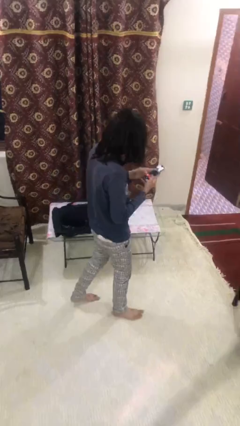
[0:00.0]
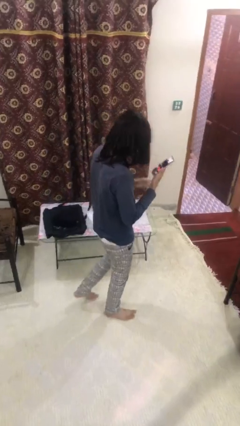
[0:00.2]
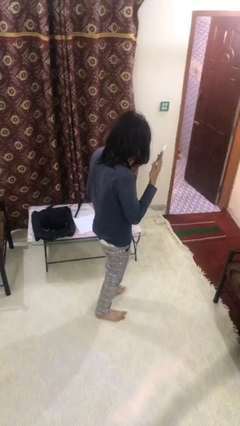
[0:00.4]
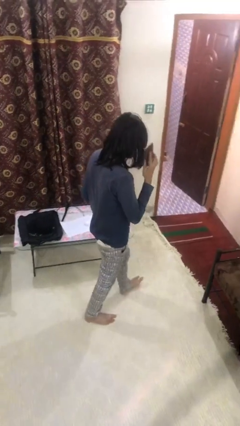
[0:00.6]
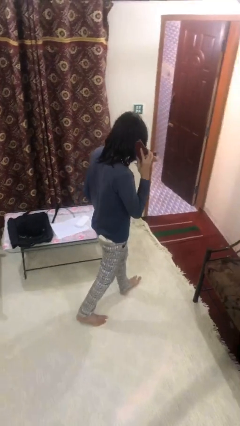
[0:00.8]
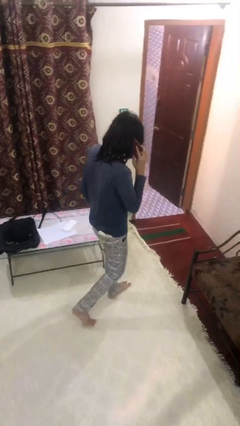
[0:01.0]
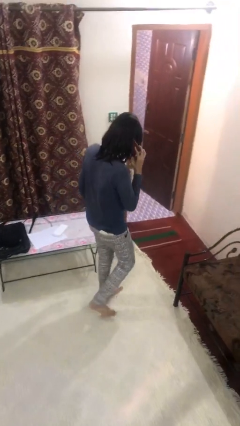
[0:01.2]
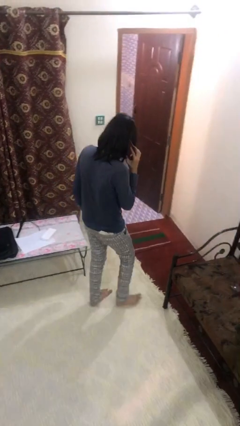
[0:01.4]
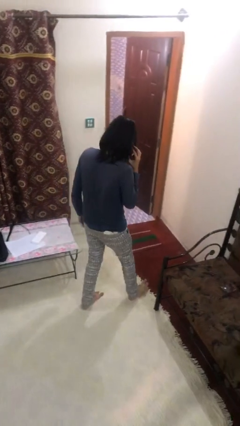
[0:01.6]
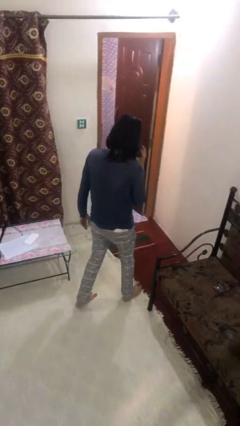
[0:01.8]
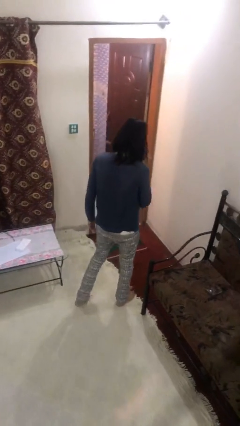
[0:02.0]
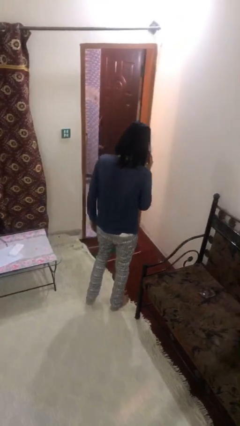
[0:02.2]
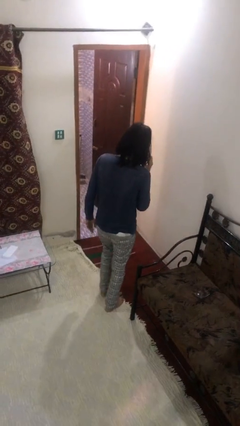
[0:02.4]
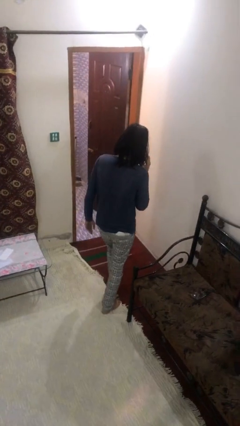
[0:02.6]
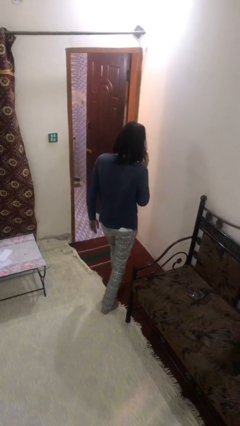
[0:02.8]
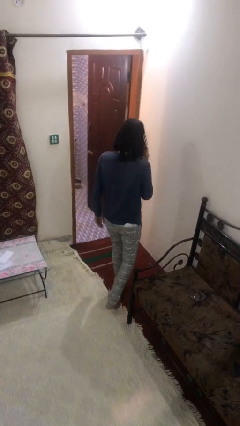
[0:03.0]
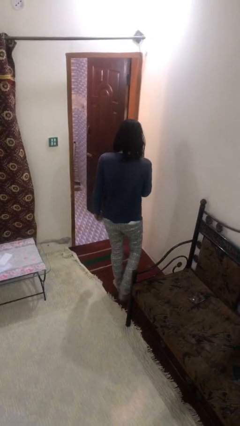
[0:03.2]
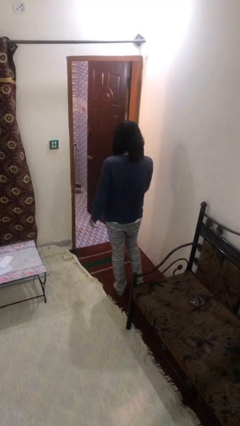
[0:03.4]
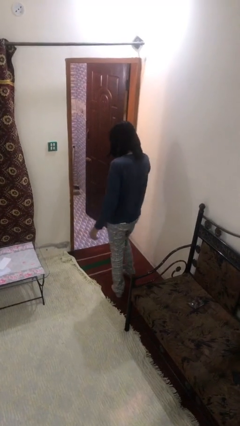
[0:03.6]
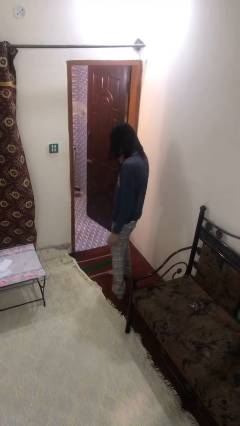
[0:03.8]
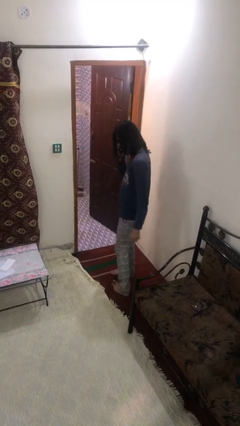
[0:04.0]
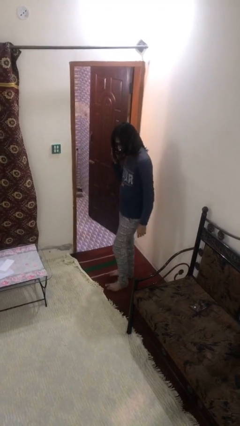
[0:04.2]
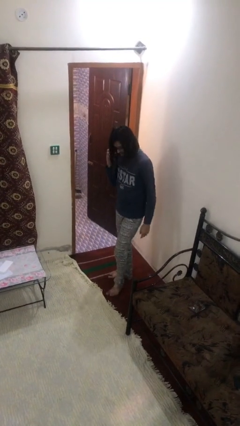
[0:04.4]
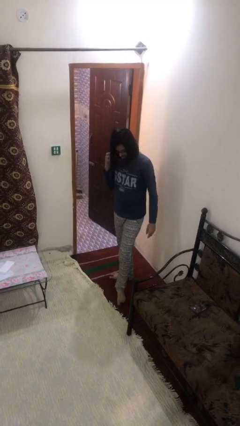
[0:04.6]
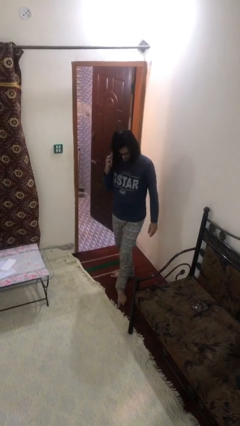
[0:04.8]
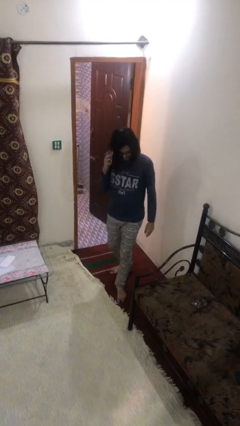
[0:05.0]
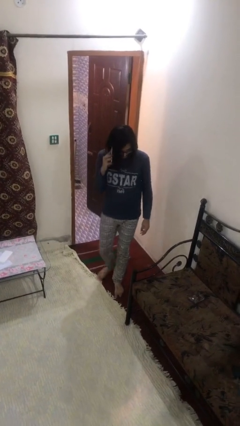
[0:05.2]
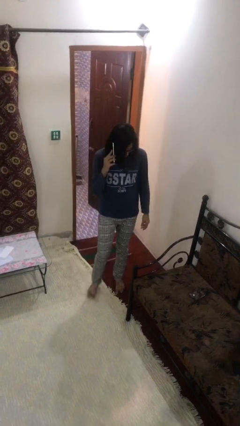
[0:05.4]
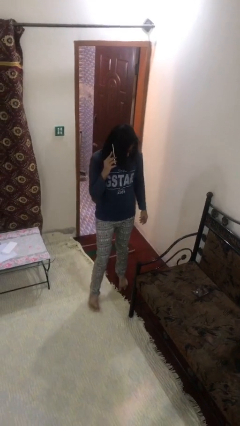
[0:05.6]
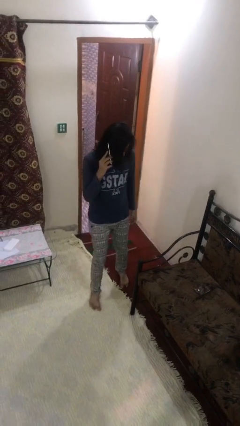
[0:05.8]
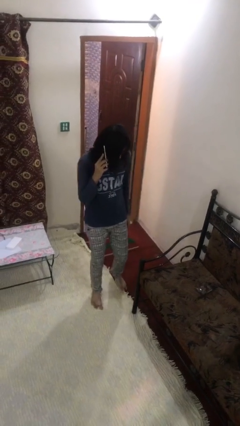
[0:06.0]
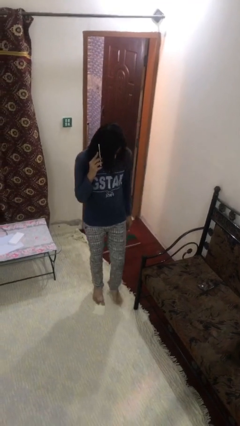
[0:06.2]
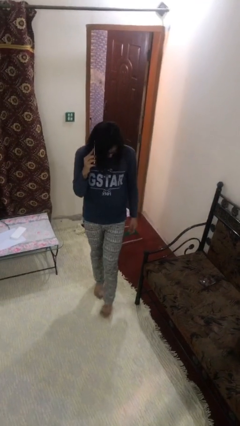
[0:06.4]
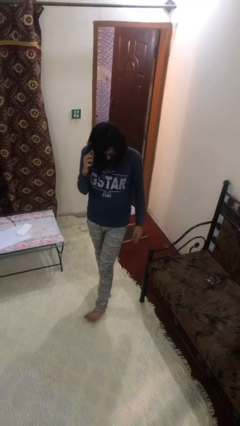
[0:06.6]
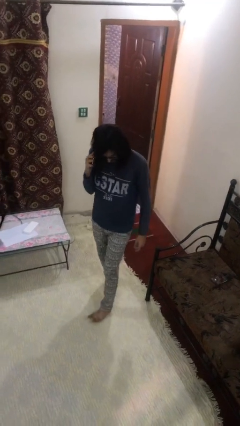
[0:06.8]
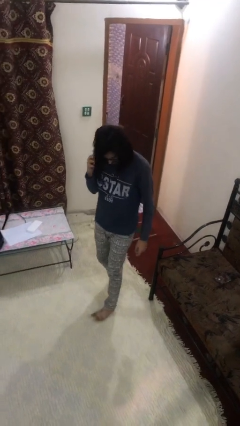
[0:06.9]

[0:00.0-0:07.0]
person talks on phone

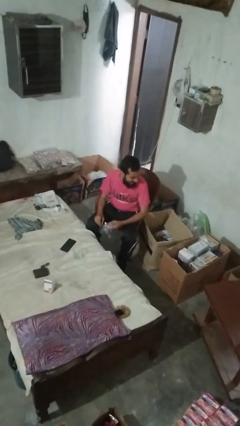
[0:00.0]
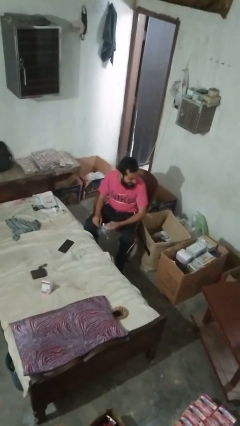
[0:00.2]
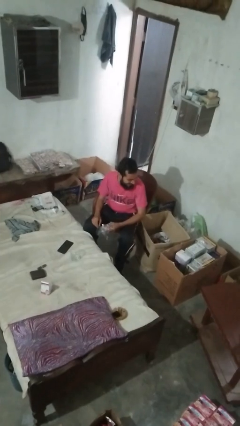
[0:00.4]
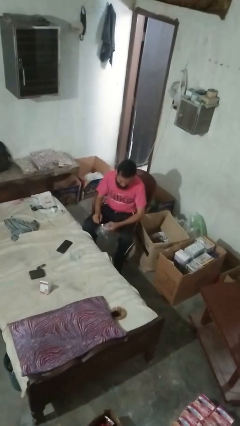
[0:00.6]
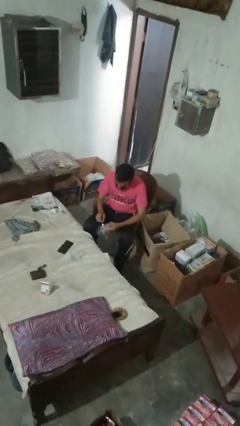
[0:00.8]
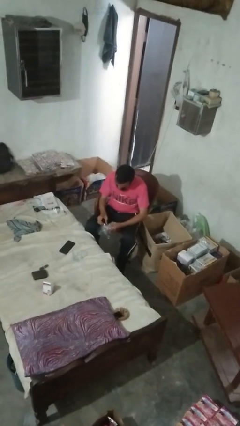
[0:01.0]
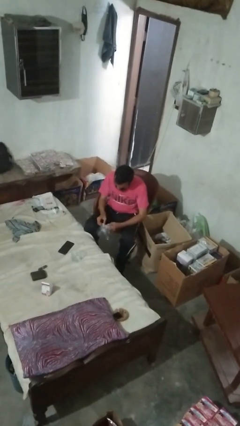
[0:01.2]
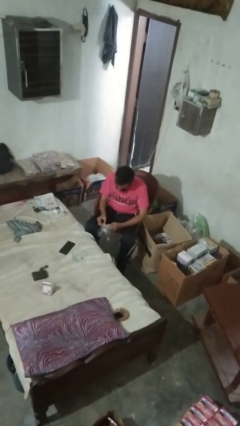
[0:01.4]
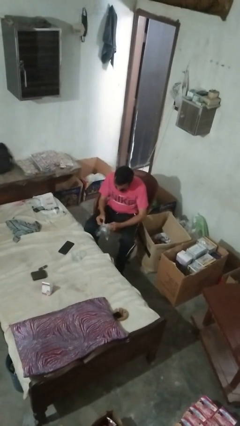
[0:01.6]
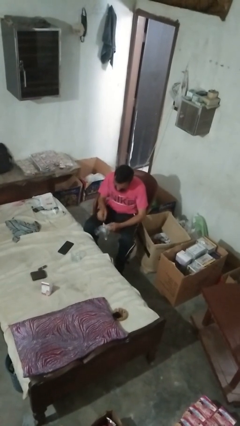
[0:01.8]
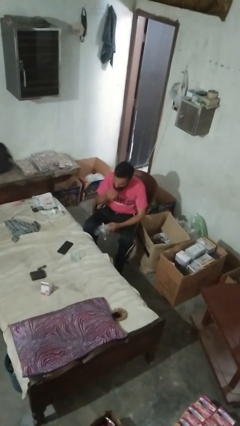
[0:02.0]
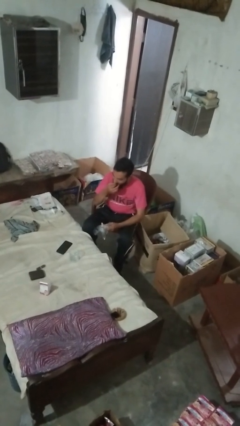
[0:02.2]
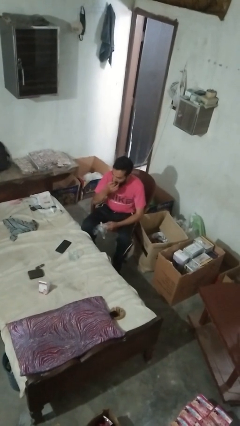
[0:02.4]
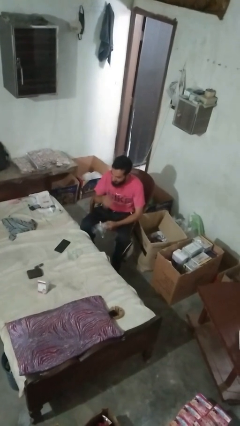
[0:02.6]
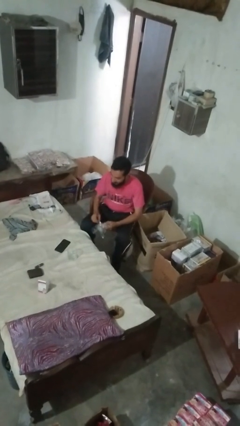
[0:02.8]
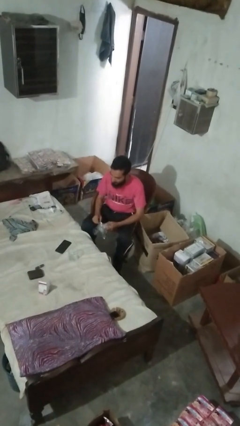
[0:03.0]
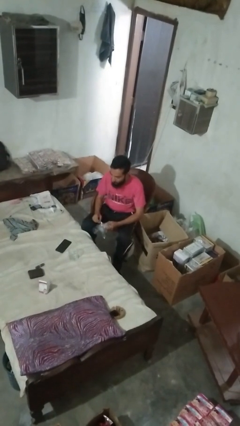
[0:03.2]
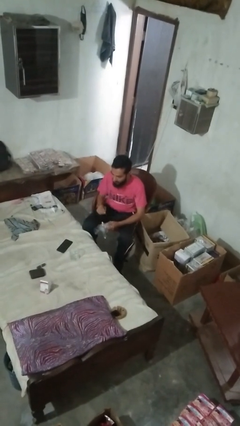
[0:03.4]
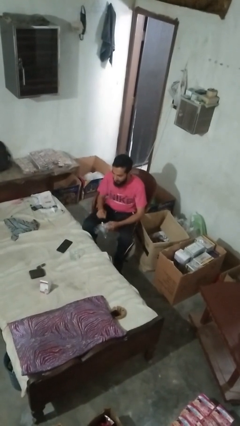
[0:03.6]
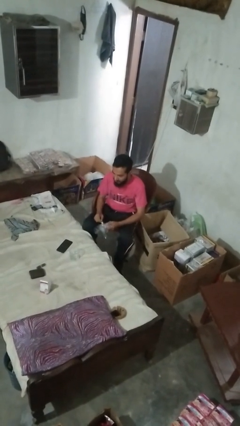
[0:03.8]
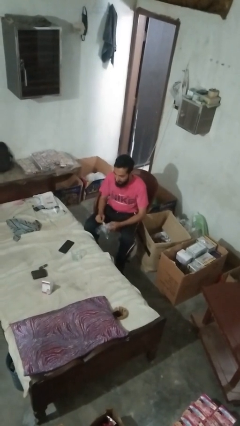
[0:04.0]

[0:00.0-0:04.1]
person licks fingers

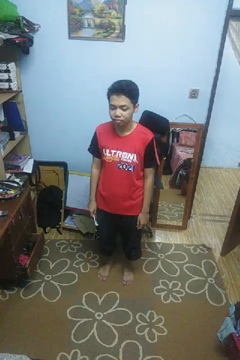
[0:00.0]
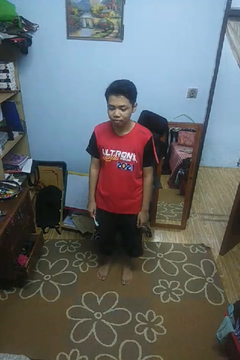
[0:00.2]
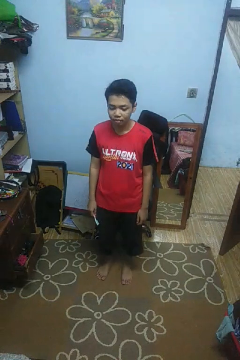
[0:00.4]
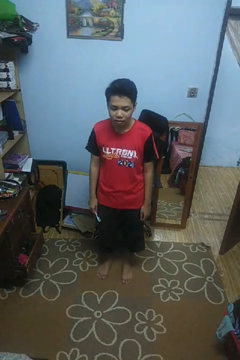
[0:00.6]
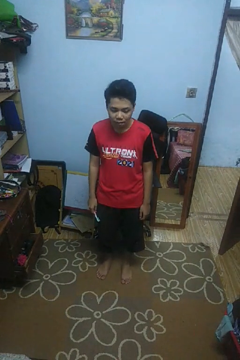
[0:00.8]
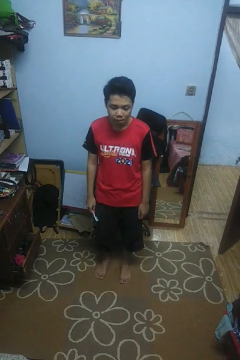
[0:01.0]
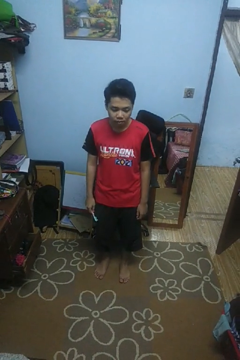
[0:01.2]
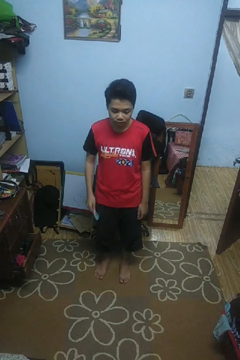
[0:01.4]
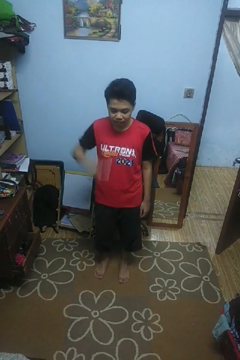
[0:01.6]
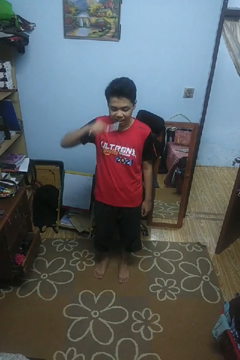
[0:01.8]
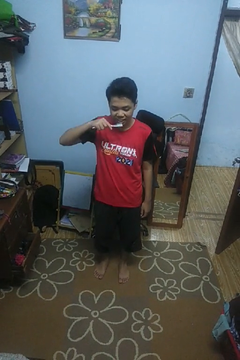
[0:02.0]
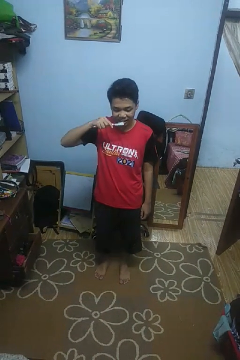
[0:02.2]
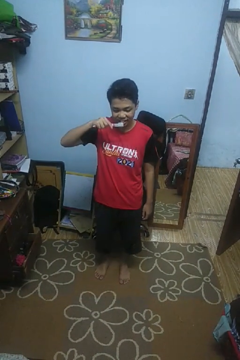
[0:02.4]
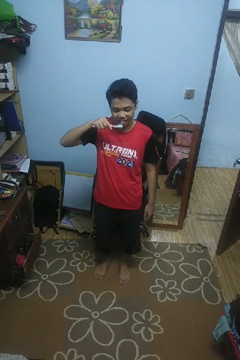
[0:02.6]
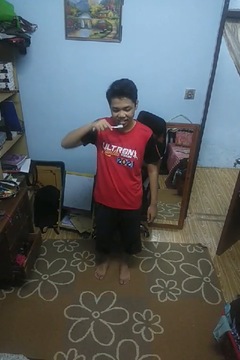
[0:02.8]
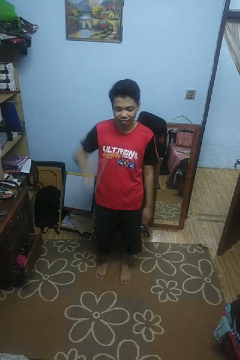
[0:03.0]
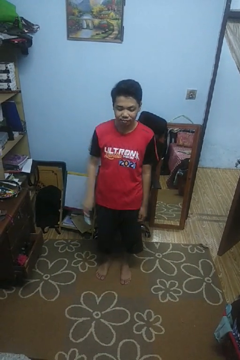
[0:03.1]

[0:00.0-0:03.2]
person brushes teeth

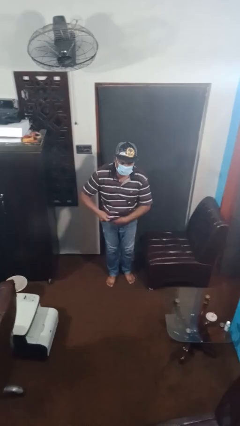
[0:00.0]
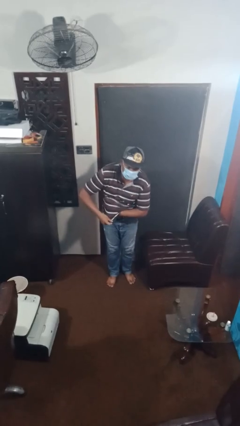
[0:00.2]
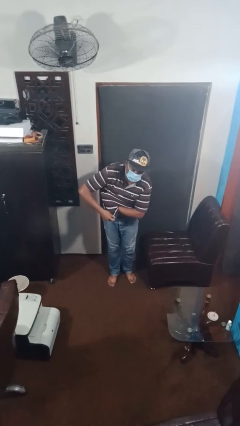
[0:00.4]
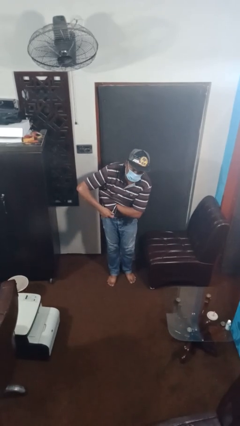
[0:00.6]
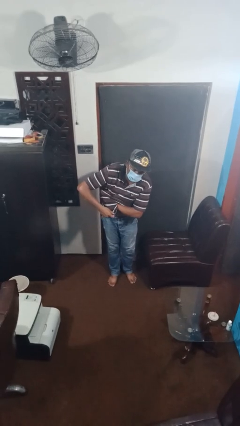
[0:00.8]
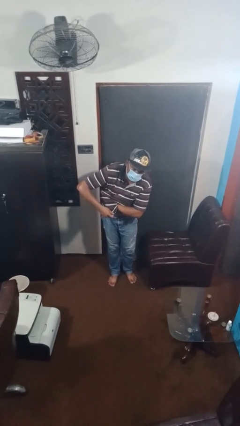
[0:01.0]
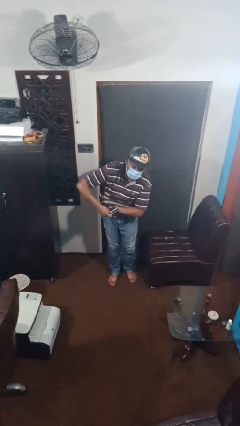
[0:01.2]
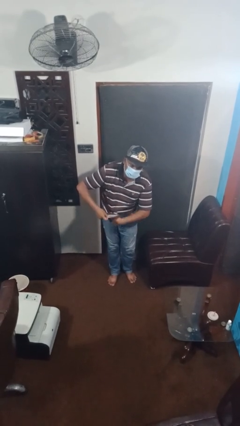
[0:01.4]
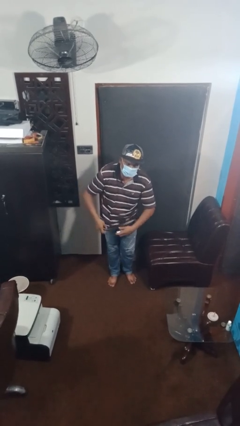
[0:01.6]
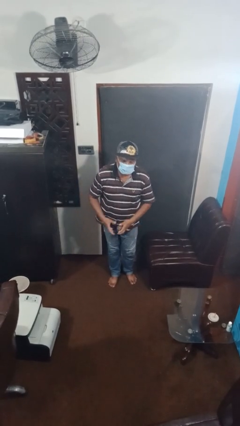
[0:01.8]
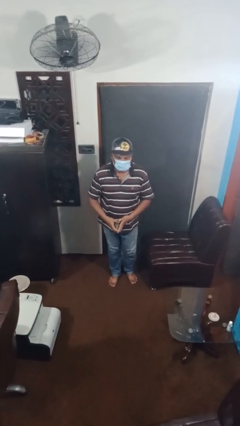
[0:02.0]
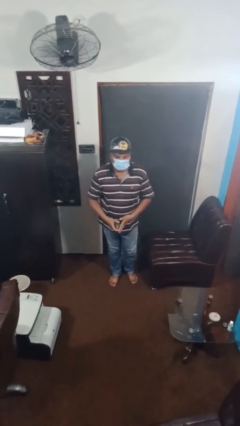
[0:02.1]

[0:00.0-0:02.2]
person applies deodorant

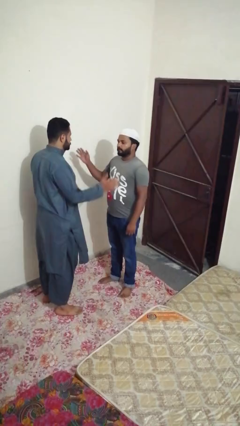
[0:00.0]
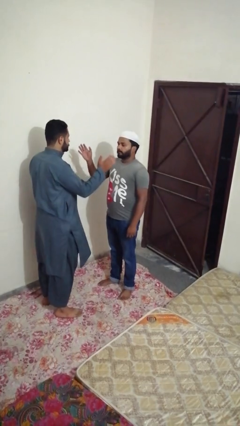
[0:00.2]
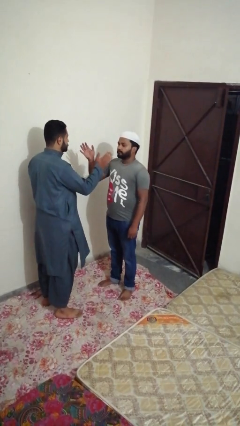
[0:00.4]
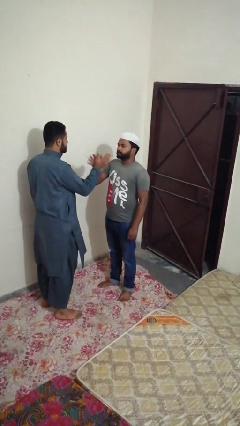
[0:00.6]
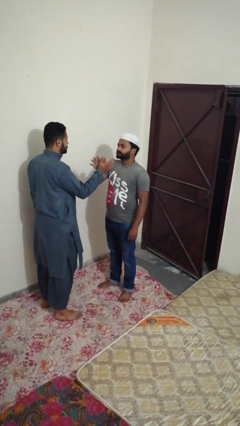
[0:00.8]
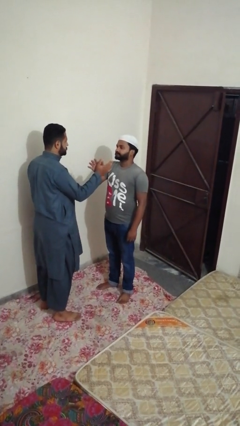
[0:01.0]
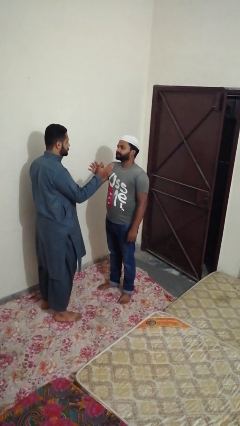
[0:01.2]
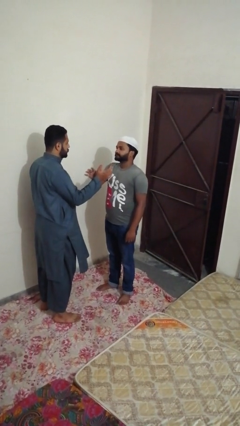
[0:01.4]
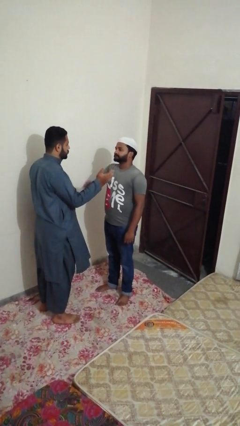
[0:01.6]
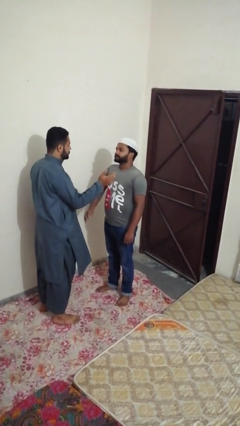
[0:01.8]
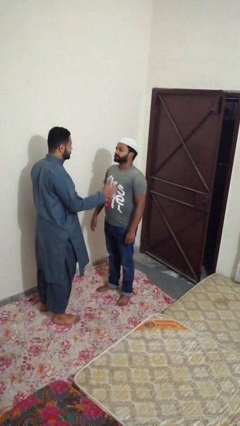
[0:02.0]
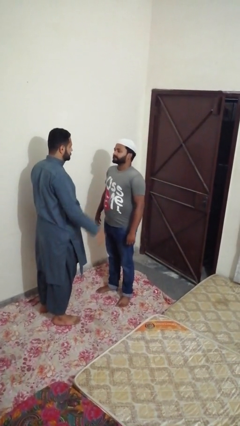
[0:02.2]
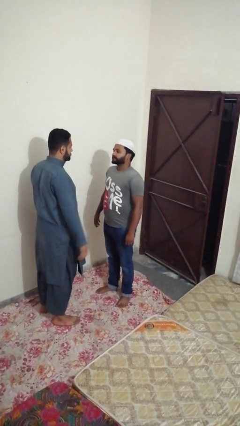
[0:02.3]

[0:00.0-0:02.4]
person highfives hand
